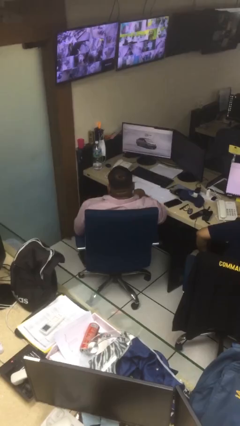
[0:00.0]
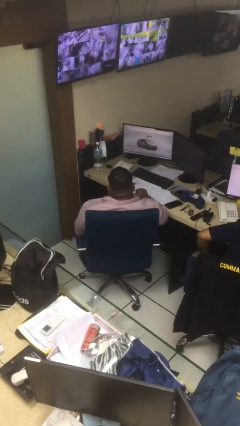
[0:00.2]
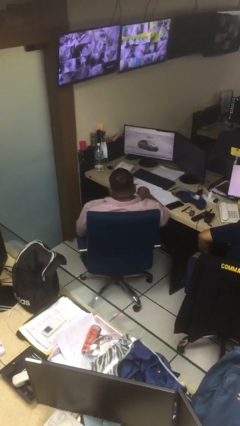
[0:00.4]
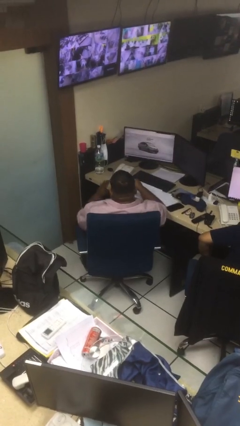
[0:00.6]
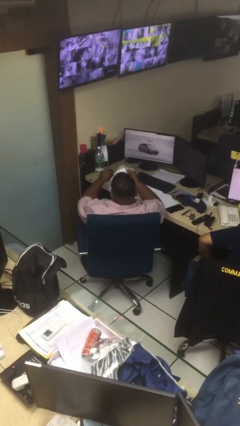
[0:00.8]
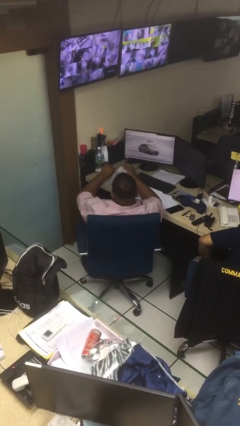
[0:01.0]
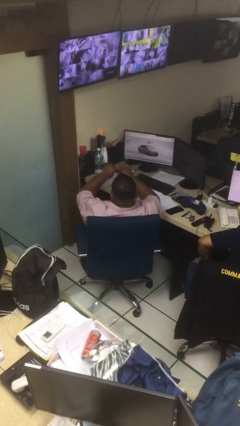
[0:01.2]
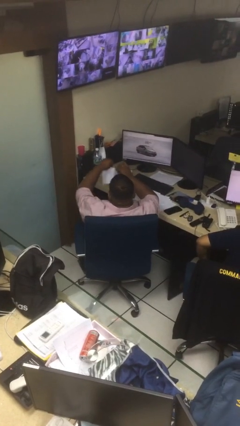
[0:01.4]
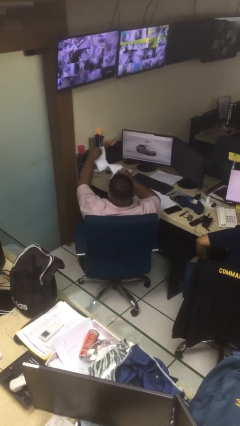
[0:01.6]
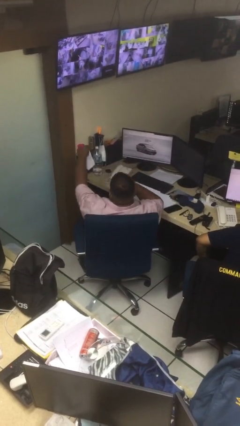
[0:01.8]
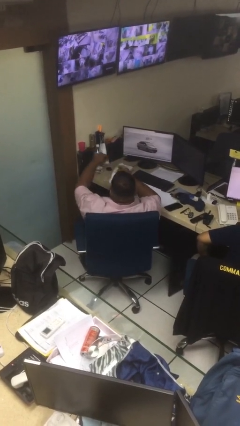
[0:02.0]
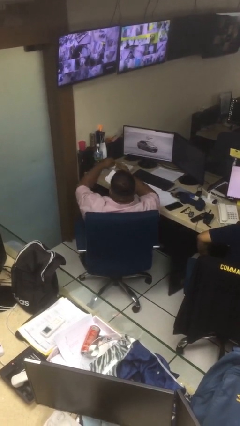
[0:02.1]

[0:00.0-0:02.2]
person tears paper

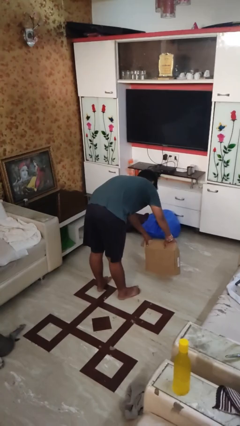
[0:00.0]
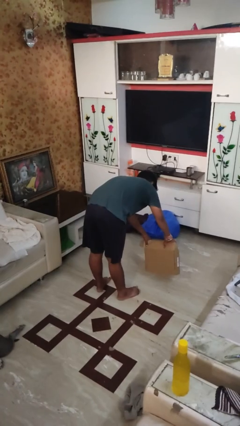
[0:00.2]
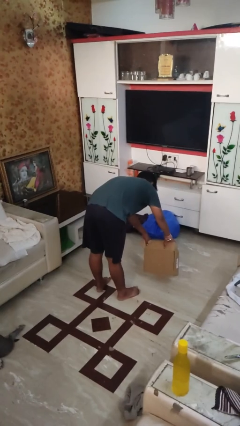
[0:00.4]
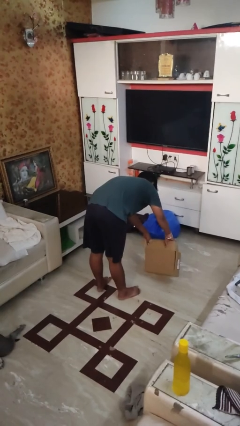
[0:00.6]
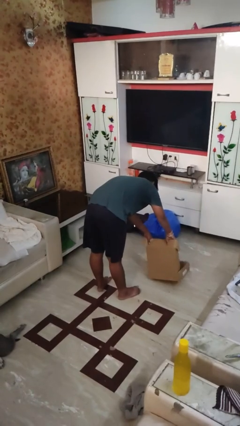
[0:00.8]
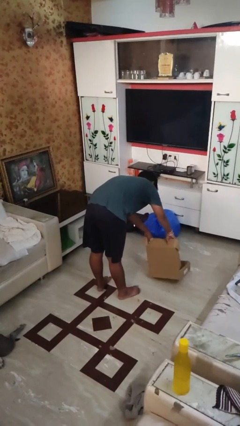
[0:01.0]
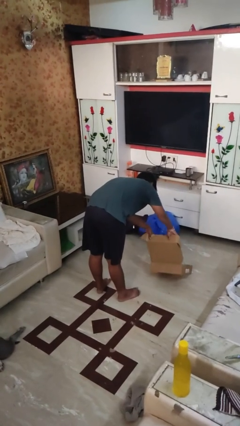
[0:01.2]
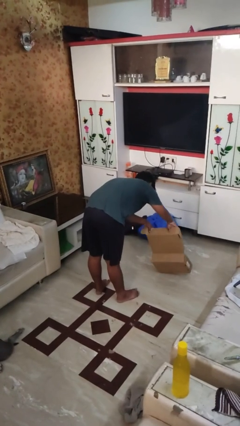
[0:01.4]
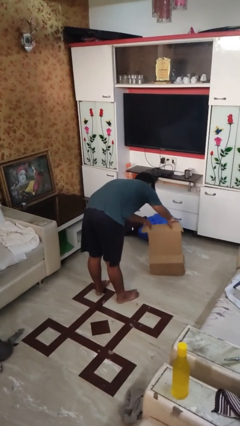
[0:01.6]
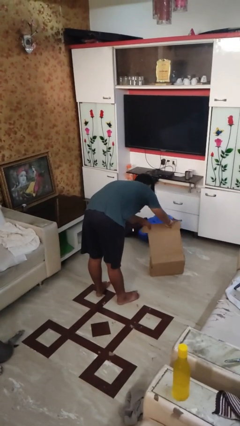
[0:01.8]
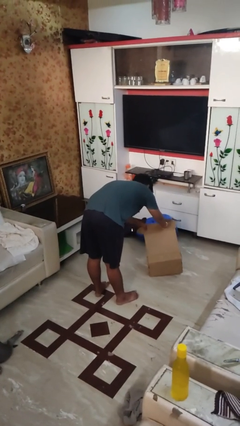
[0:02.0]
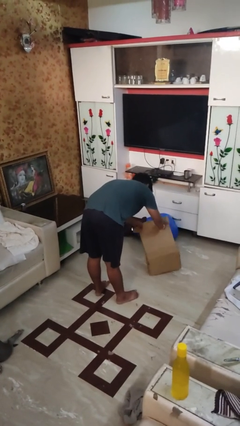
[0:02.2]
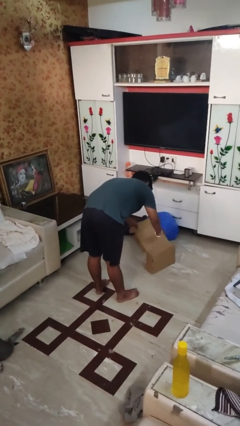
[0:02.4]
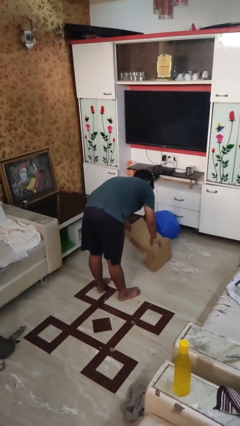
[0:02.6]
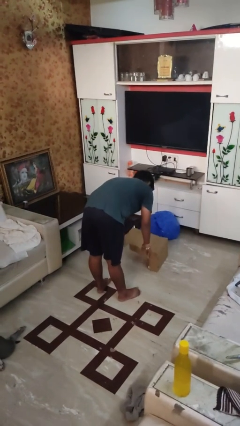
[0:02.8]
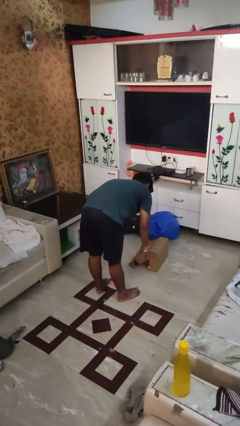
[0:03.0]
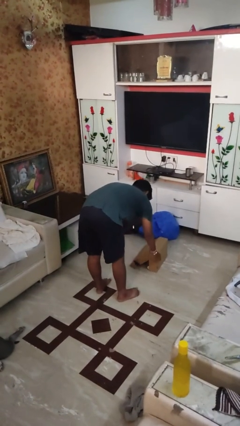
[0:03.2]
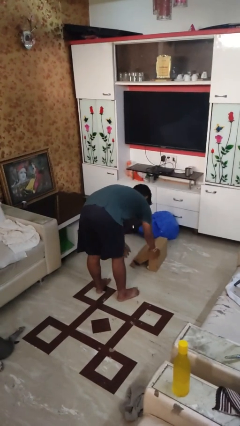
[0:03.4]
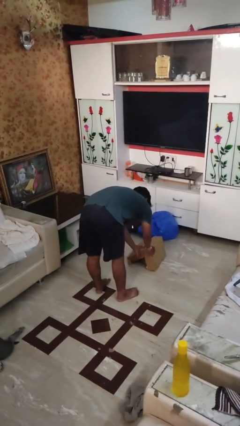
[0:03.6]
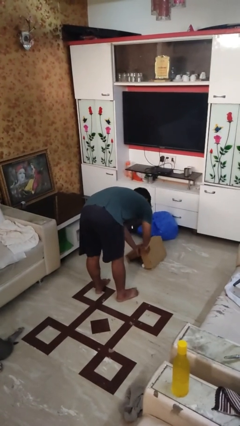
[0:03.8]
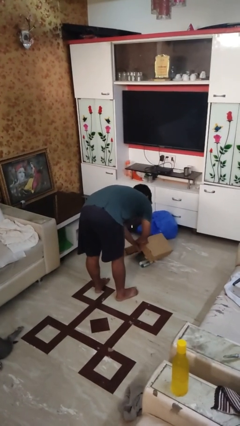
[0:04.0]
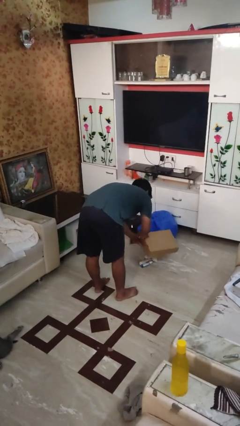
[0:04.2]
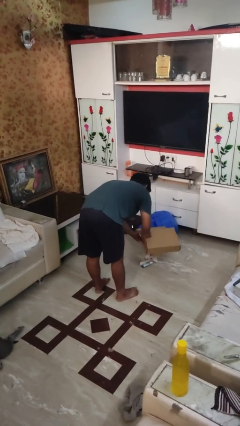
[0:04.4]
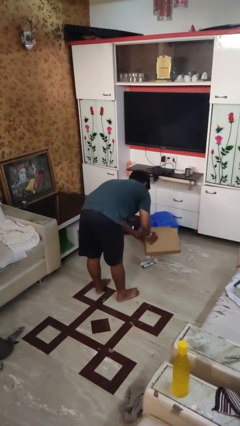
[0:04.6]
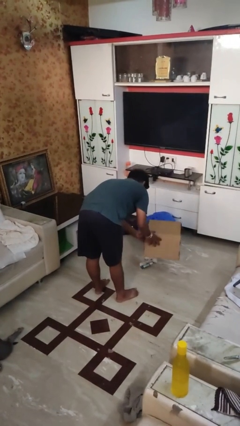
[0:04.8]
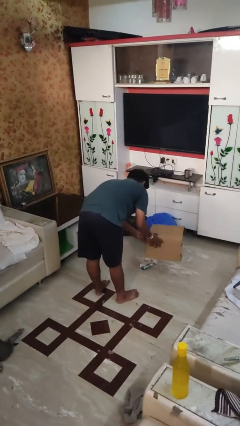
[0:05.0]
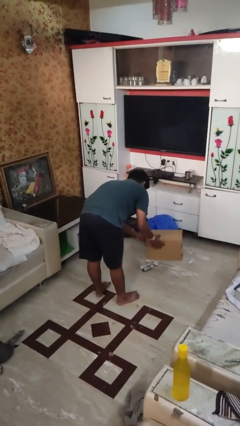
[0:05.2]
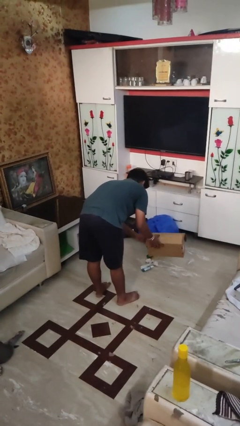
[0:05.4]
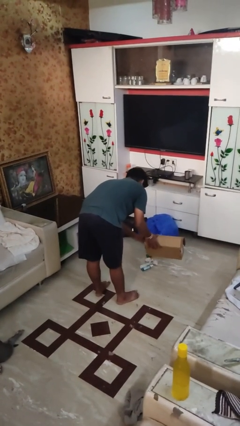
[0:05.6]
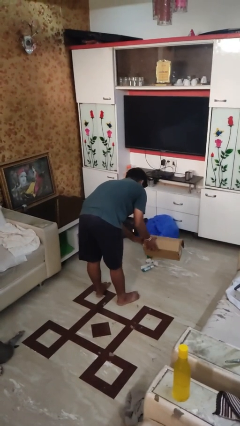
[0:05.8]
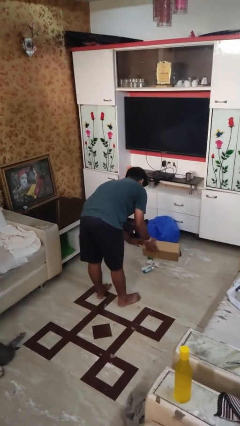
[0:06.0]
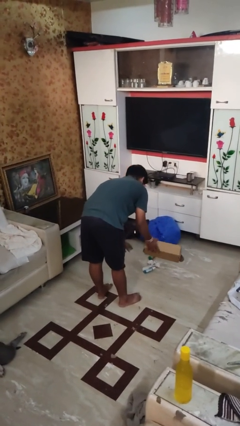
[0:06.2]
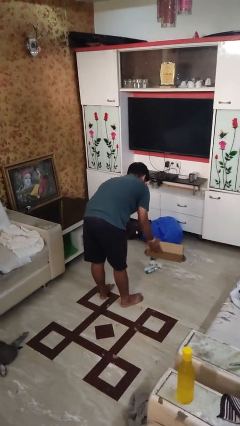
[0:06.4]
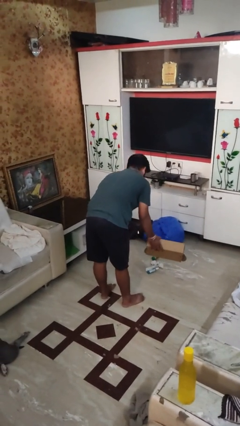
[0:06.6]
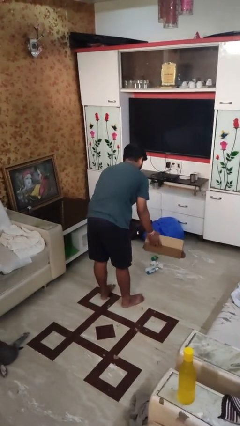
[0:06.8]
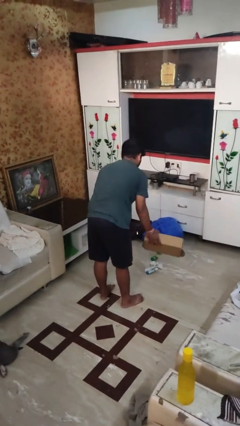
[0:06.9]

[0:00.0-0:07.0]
person unloads box onto floor

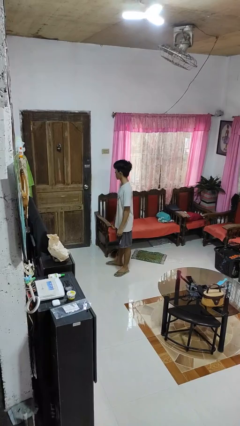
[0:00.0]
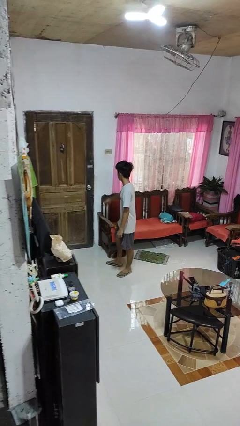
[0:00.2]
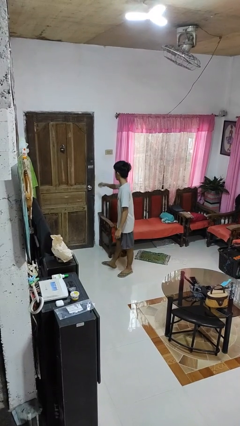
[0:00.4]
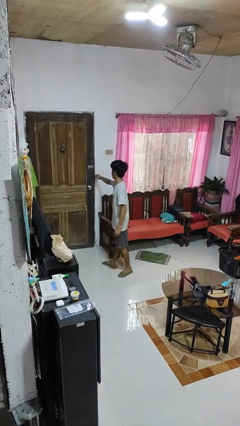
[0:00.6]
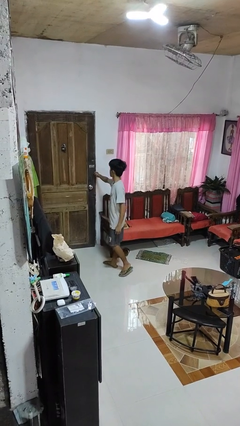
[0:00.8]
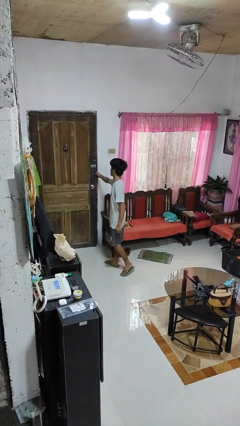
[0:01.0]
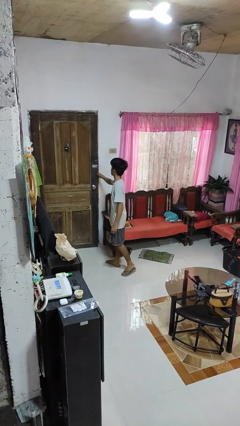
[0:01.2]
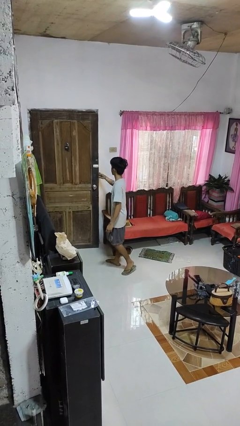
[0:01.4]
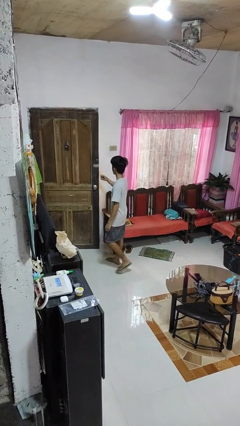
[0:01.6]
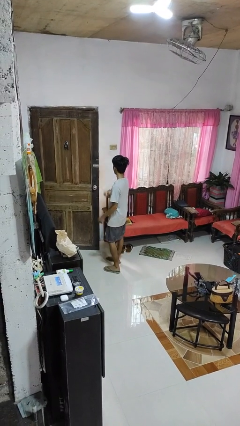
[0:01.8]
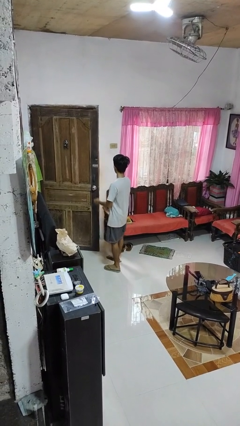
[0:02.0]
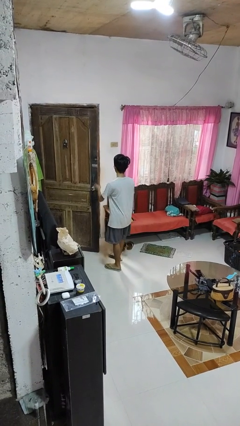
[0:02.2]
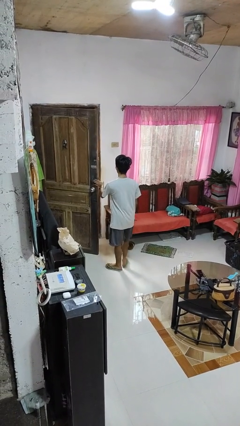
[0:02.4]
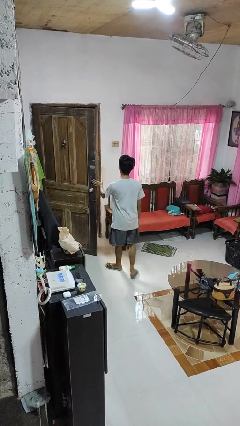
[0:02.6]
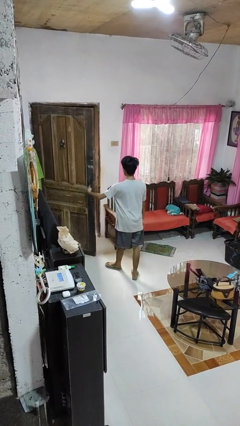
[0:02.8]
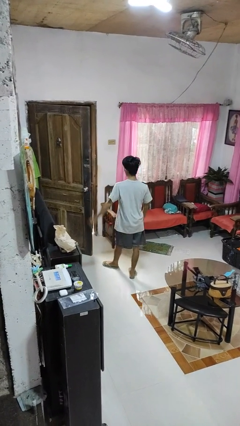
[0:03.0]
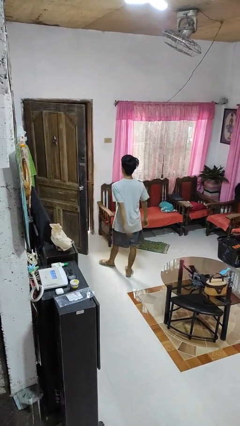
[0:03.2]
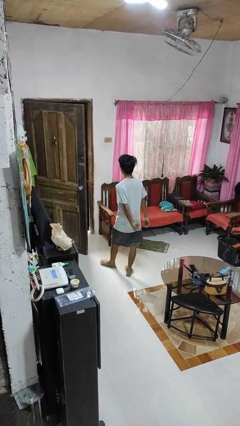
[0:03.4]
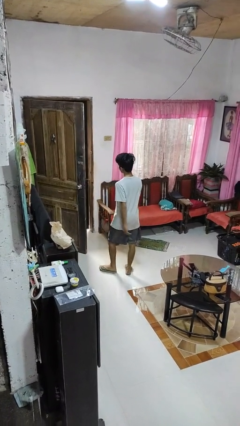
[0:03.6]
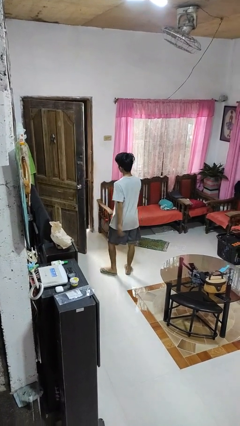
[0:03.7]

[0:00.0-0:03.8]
person opens facility door

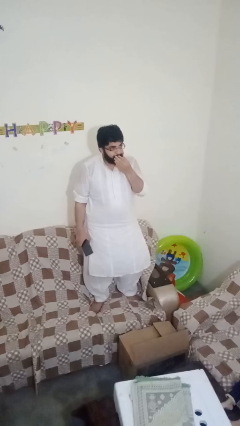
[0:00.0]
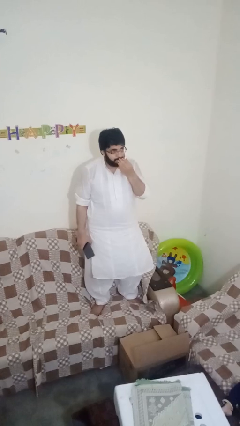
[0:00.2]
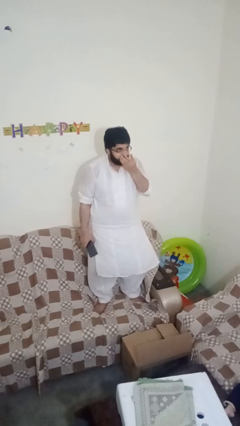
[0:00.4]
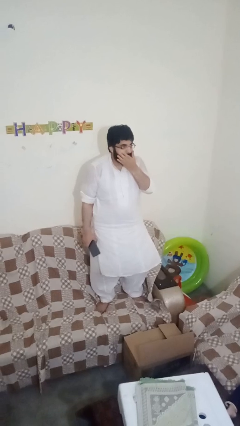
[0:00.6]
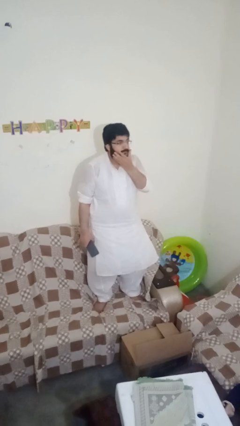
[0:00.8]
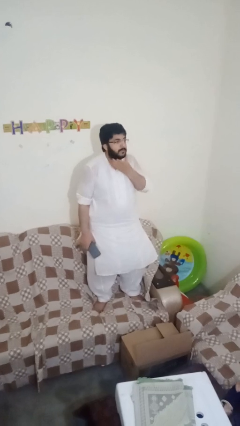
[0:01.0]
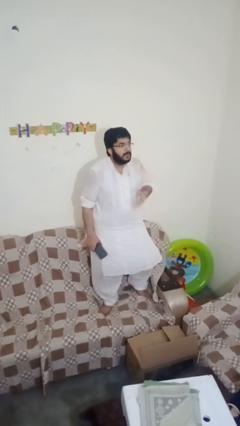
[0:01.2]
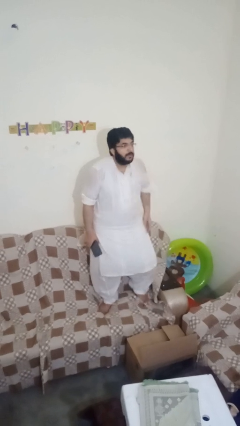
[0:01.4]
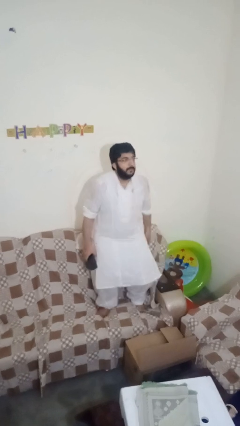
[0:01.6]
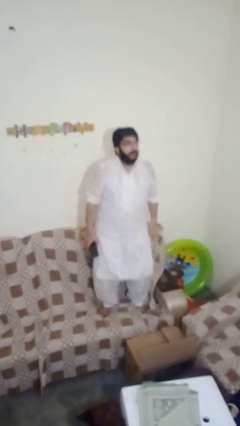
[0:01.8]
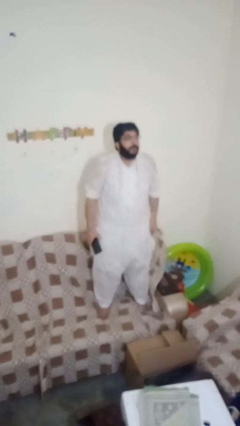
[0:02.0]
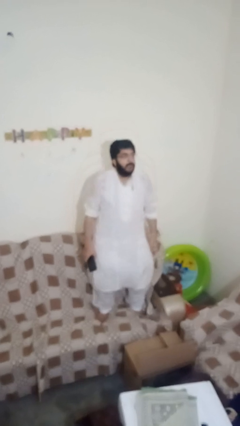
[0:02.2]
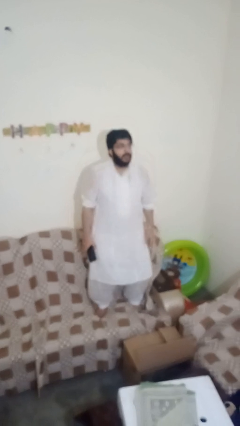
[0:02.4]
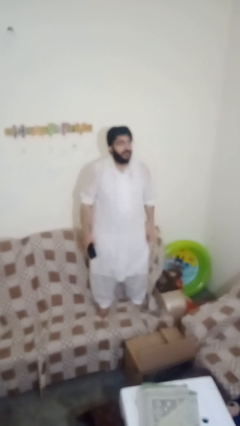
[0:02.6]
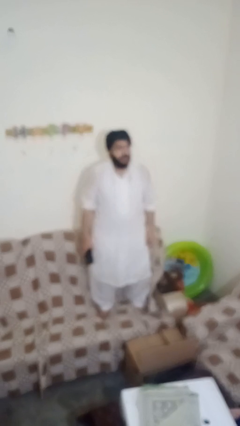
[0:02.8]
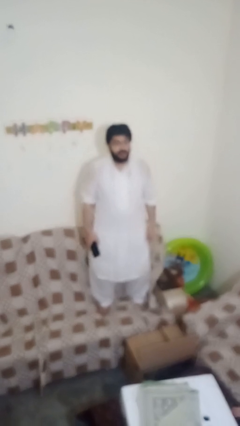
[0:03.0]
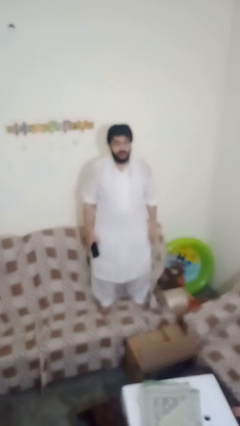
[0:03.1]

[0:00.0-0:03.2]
person jumps on couch

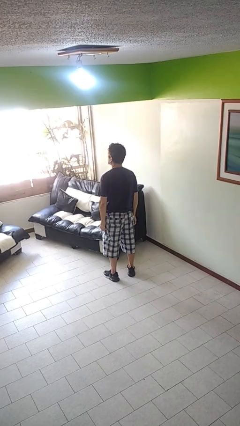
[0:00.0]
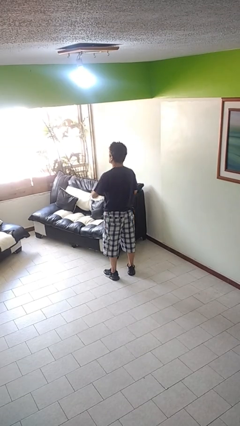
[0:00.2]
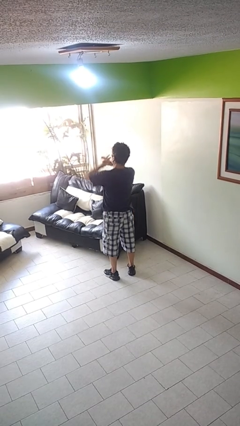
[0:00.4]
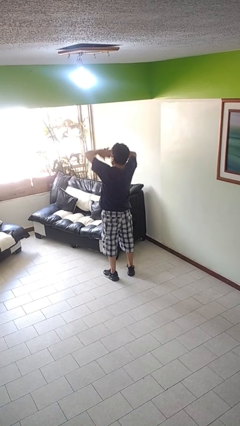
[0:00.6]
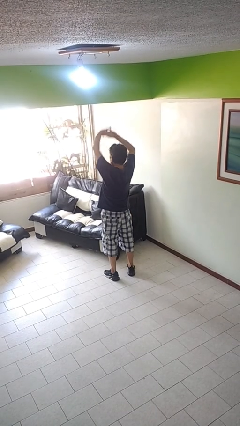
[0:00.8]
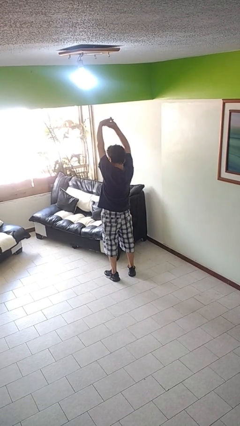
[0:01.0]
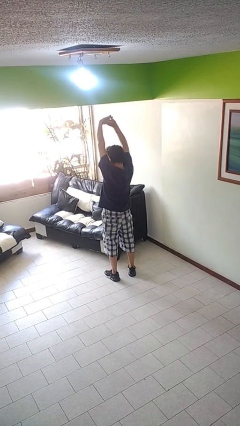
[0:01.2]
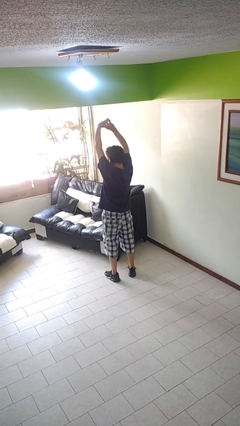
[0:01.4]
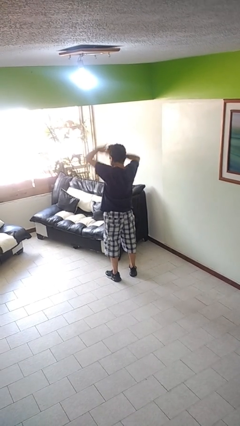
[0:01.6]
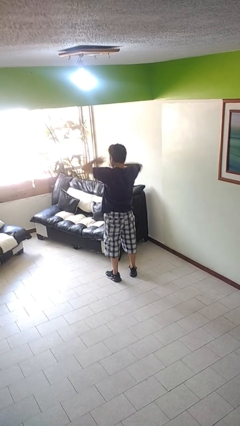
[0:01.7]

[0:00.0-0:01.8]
person stretches arms over head
